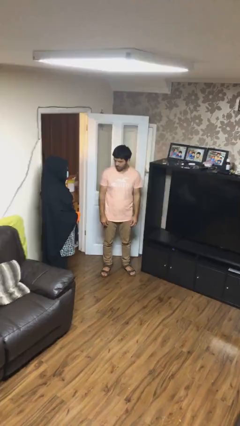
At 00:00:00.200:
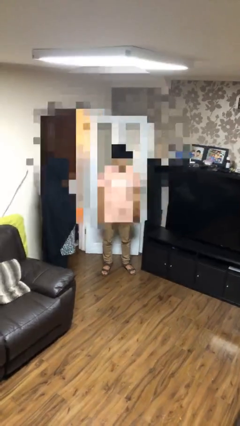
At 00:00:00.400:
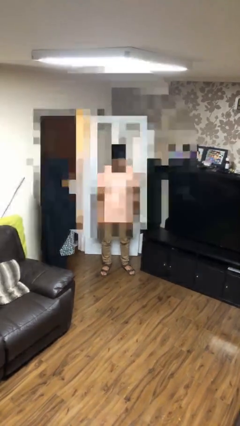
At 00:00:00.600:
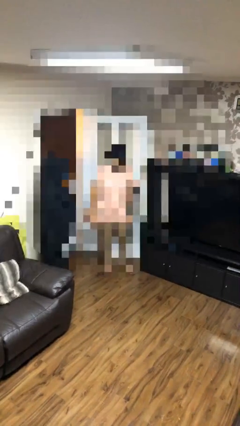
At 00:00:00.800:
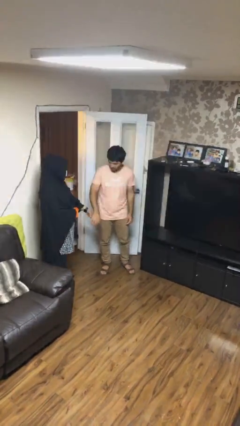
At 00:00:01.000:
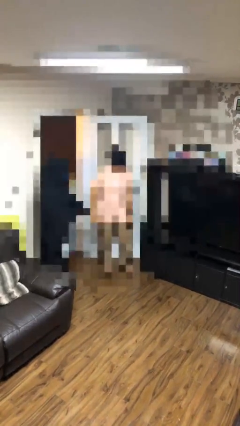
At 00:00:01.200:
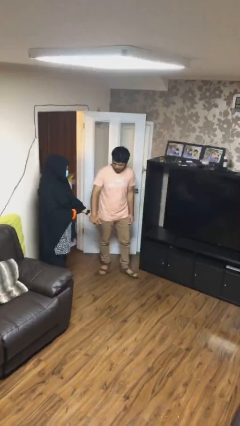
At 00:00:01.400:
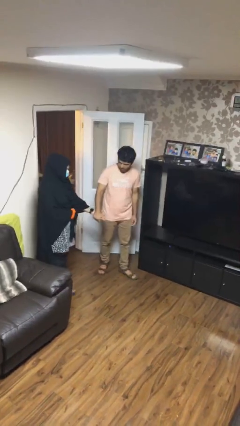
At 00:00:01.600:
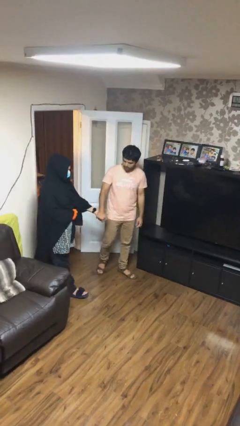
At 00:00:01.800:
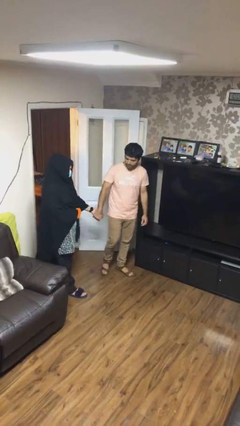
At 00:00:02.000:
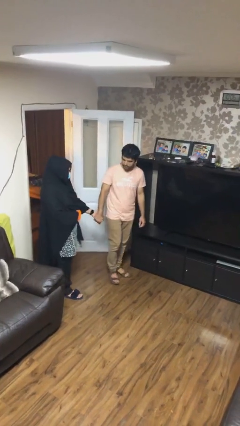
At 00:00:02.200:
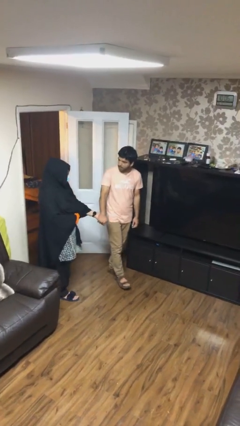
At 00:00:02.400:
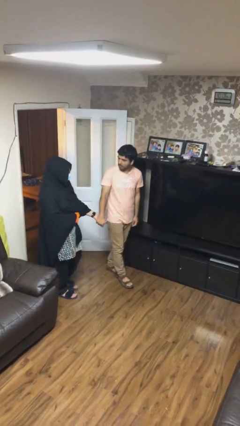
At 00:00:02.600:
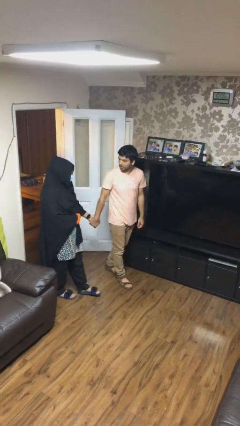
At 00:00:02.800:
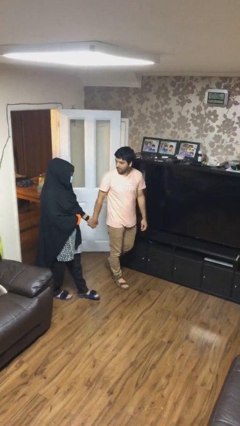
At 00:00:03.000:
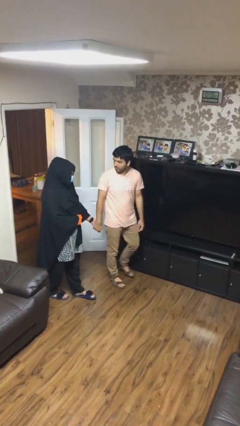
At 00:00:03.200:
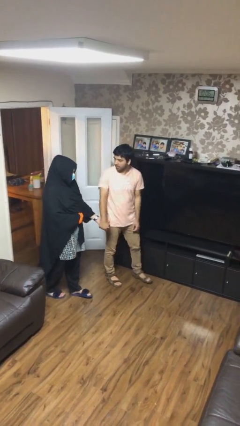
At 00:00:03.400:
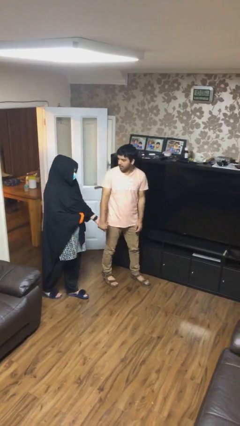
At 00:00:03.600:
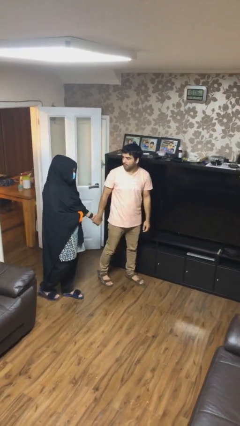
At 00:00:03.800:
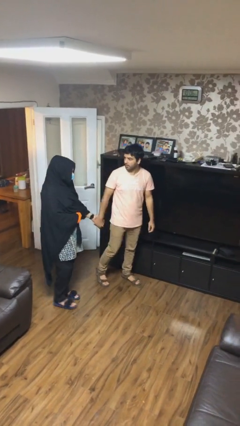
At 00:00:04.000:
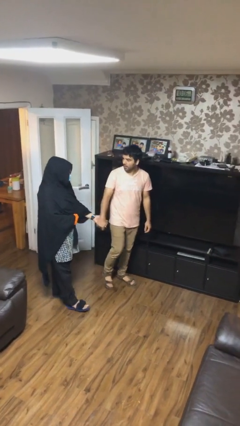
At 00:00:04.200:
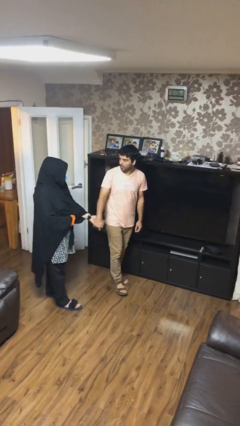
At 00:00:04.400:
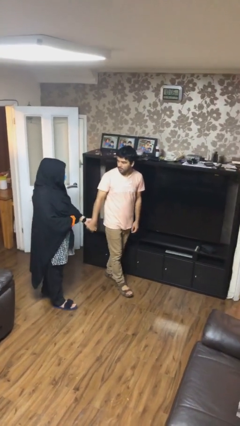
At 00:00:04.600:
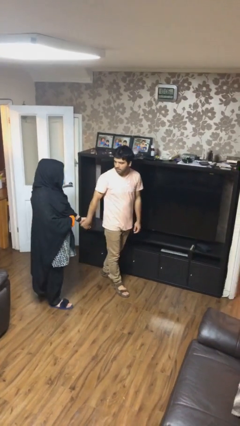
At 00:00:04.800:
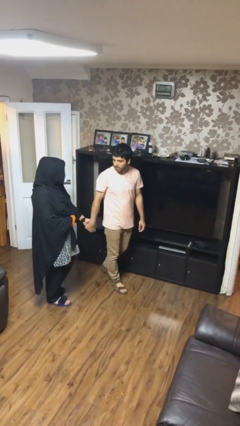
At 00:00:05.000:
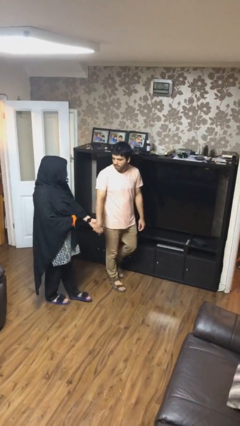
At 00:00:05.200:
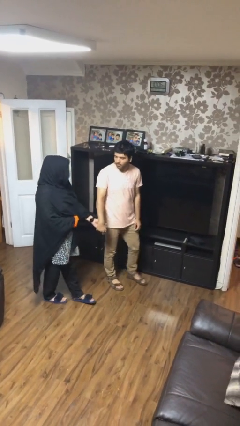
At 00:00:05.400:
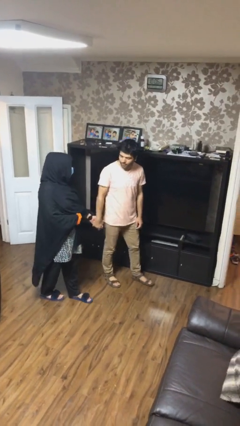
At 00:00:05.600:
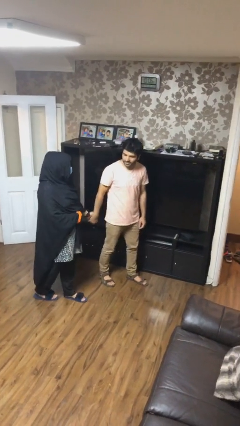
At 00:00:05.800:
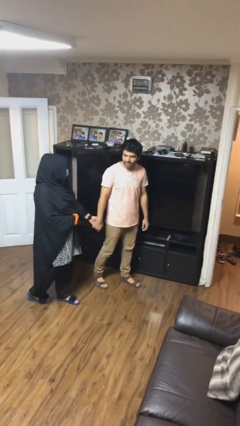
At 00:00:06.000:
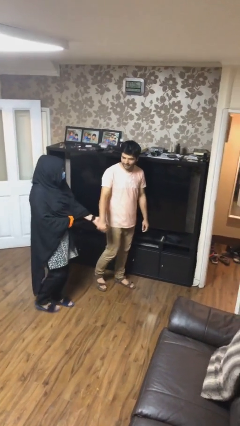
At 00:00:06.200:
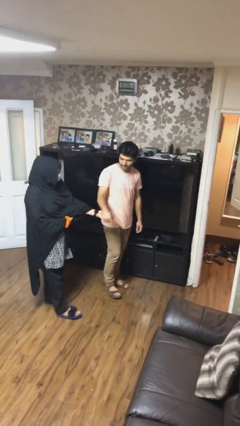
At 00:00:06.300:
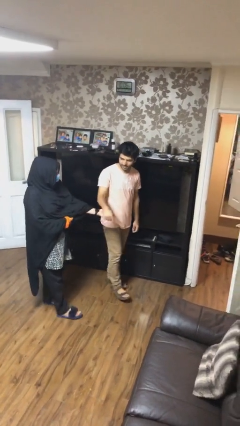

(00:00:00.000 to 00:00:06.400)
person holds hand

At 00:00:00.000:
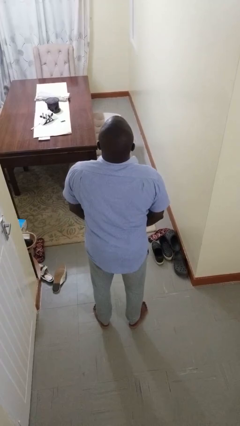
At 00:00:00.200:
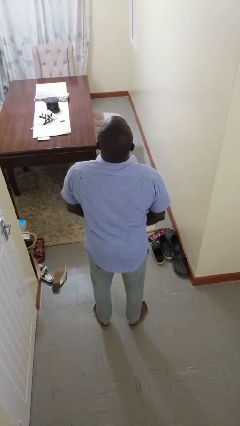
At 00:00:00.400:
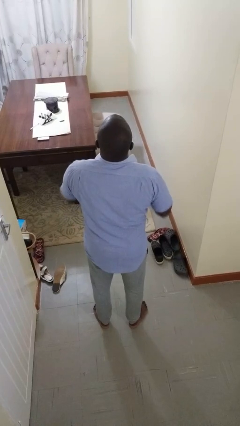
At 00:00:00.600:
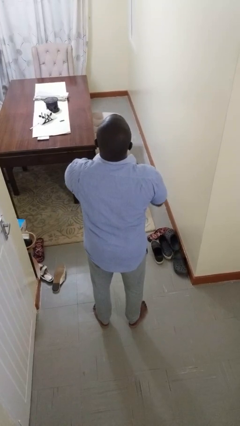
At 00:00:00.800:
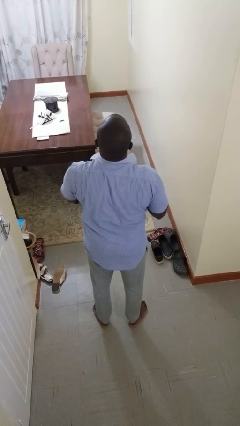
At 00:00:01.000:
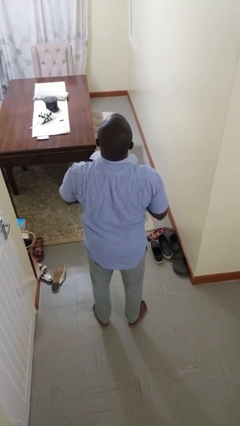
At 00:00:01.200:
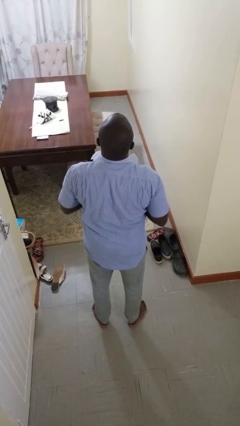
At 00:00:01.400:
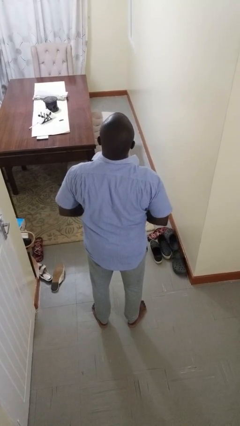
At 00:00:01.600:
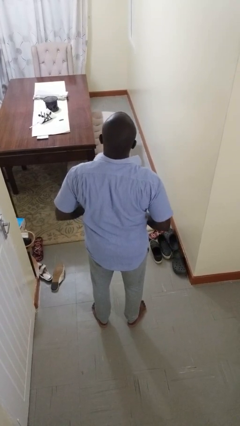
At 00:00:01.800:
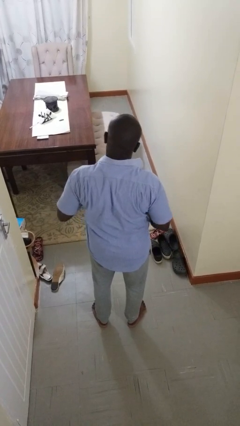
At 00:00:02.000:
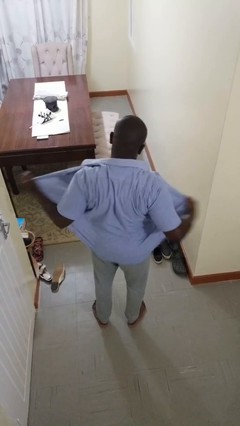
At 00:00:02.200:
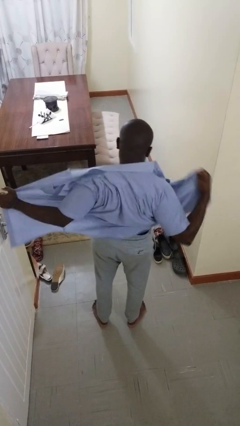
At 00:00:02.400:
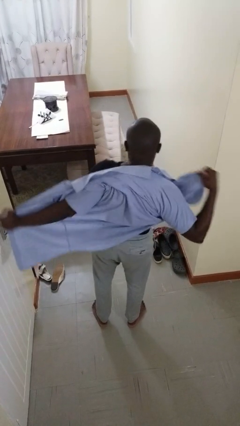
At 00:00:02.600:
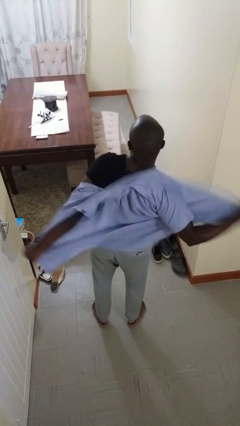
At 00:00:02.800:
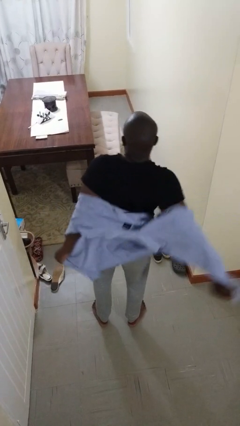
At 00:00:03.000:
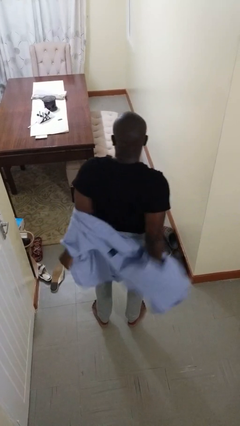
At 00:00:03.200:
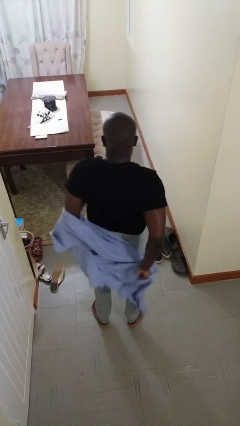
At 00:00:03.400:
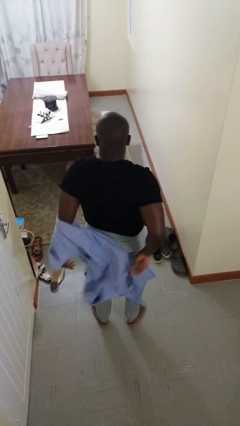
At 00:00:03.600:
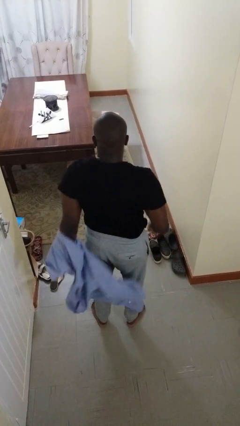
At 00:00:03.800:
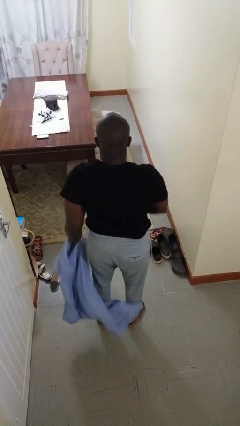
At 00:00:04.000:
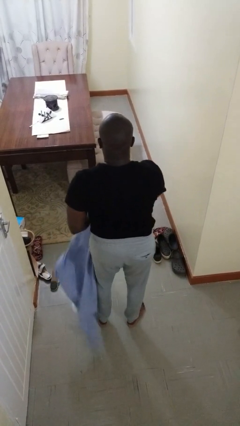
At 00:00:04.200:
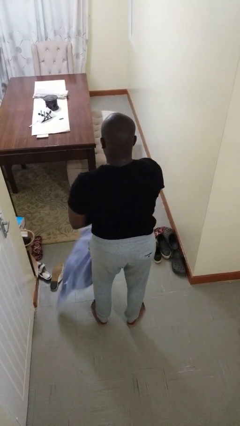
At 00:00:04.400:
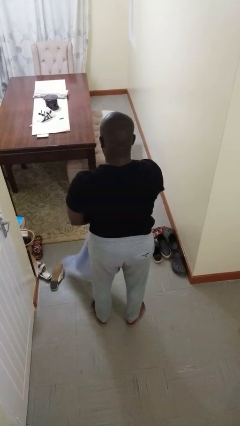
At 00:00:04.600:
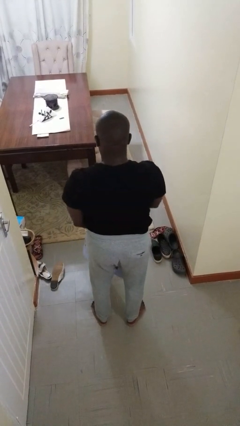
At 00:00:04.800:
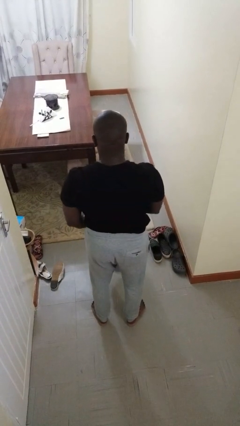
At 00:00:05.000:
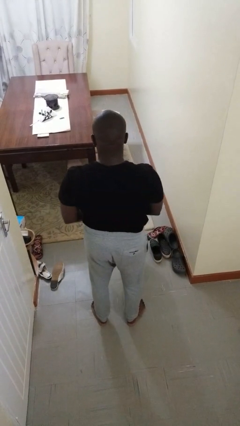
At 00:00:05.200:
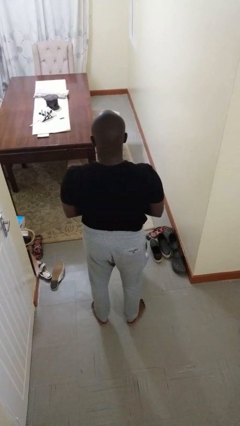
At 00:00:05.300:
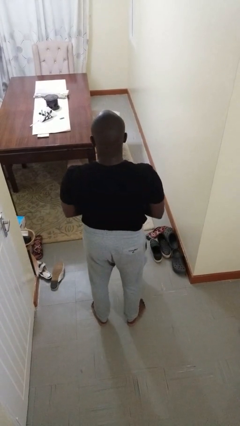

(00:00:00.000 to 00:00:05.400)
person takes off shirt

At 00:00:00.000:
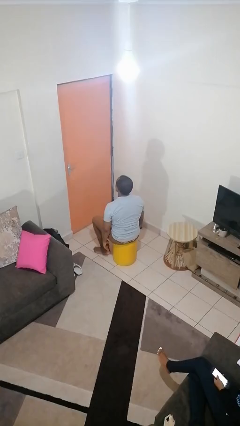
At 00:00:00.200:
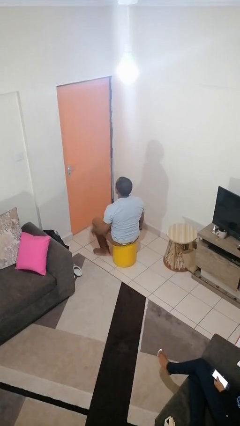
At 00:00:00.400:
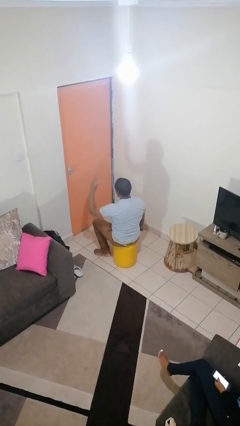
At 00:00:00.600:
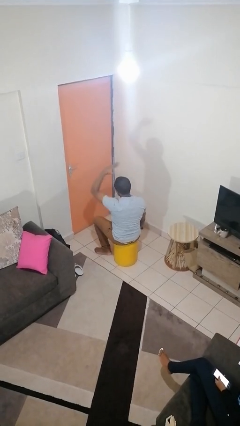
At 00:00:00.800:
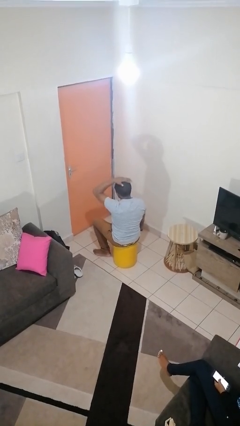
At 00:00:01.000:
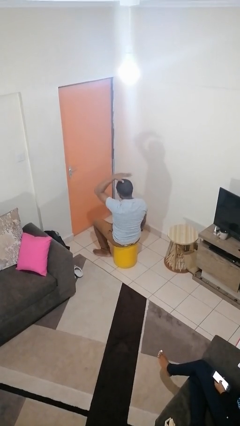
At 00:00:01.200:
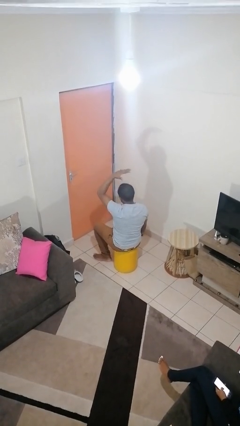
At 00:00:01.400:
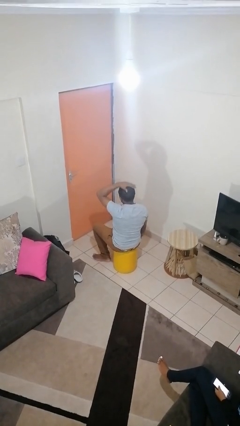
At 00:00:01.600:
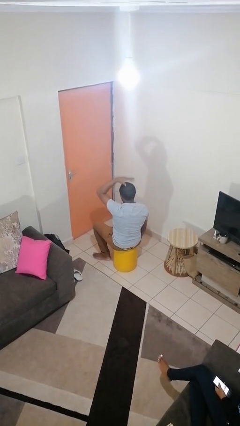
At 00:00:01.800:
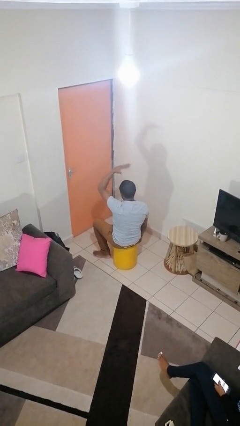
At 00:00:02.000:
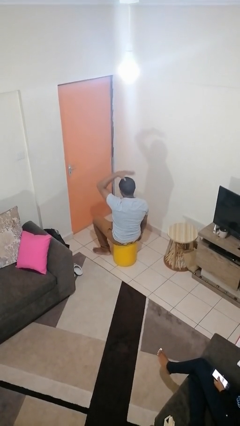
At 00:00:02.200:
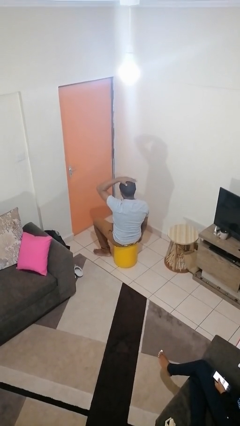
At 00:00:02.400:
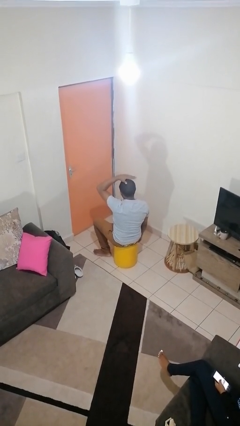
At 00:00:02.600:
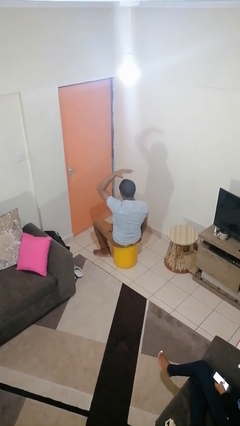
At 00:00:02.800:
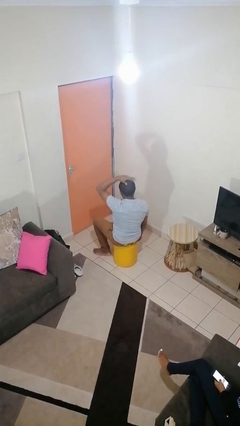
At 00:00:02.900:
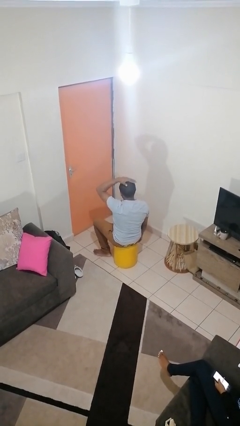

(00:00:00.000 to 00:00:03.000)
person pats head

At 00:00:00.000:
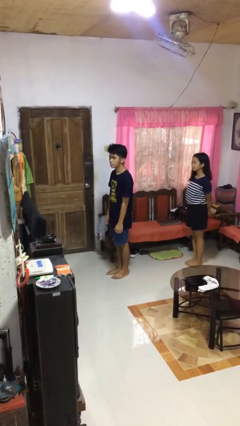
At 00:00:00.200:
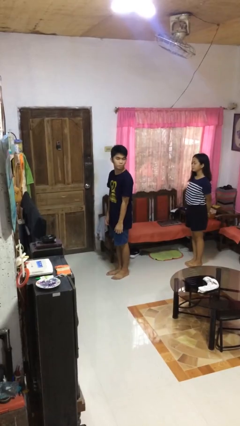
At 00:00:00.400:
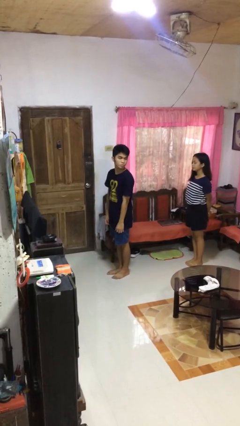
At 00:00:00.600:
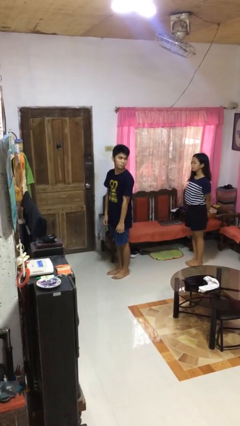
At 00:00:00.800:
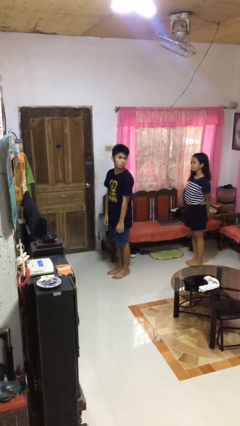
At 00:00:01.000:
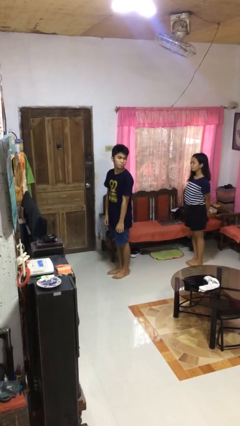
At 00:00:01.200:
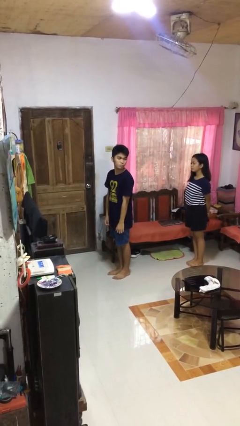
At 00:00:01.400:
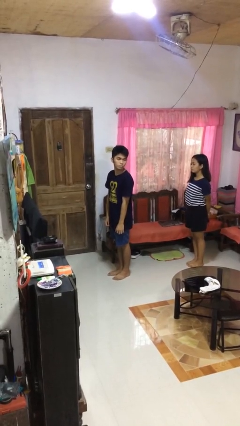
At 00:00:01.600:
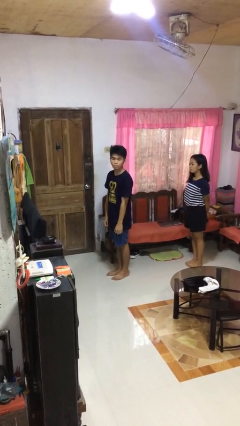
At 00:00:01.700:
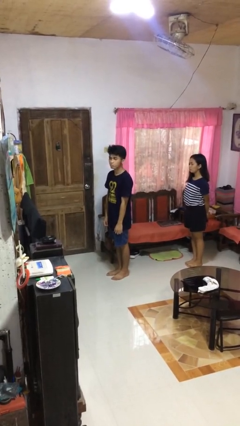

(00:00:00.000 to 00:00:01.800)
person looks over shoulder

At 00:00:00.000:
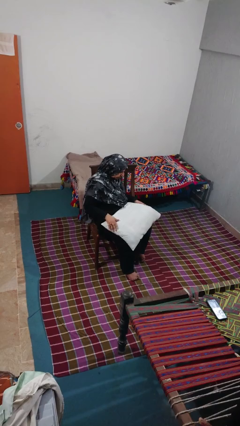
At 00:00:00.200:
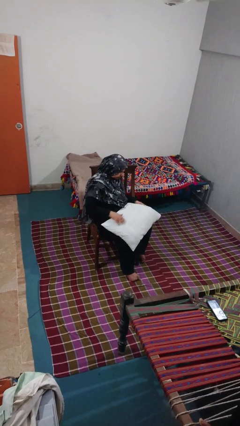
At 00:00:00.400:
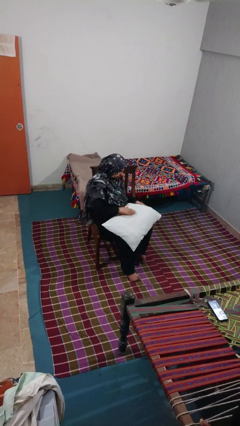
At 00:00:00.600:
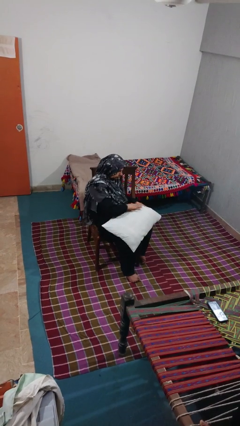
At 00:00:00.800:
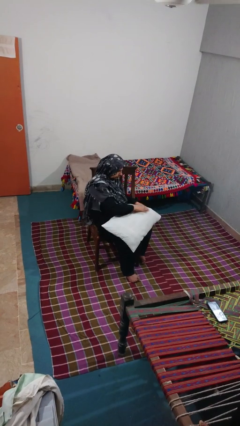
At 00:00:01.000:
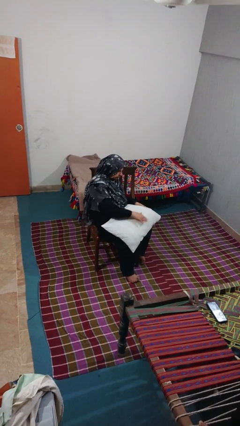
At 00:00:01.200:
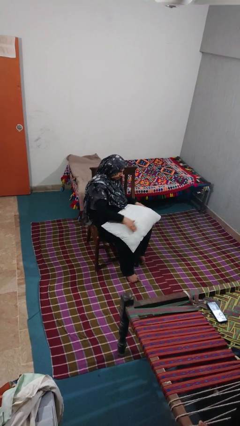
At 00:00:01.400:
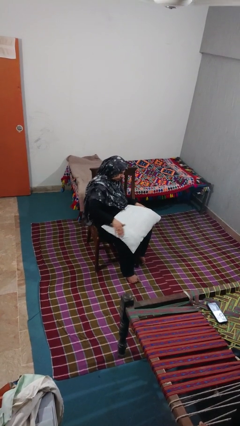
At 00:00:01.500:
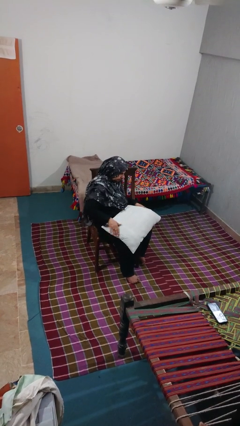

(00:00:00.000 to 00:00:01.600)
person waves hand over object
